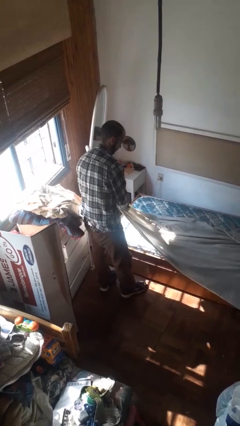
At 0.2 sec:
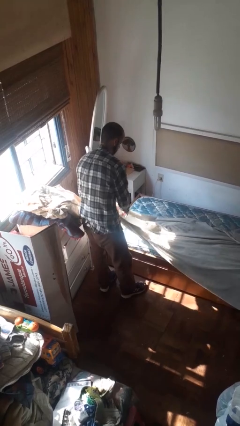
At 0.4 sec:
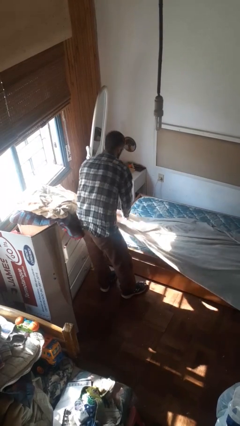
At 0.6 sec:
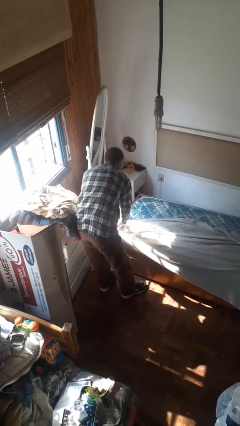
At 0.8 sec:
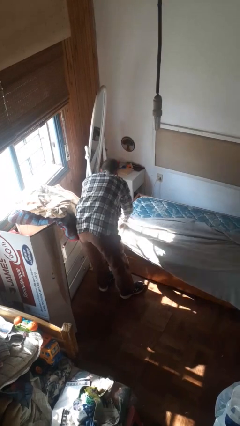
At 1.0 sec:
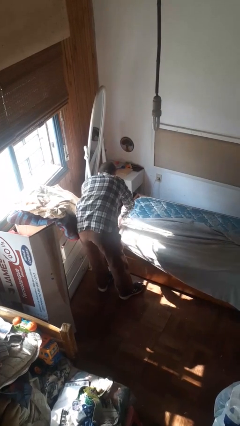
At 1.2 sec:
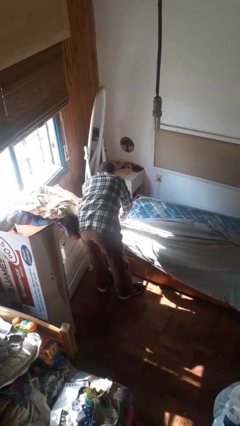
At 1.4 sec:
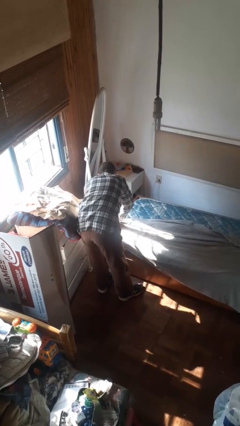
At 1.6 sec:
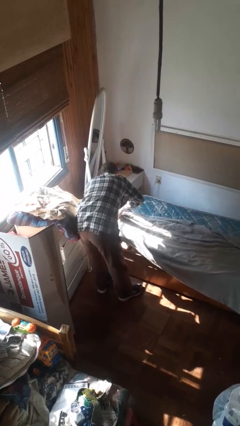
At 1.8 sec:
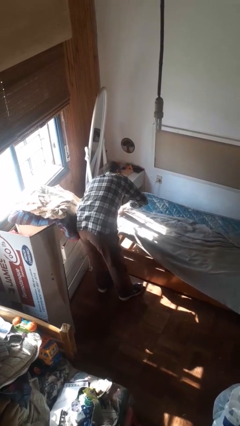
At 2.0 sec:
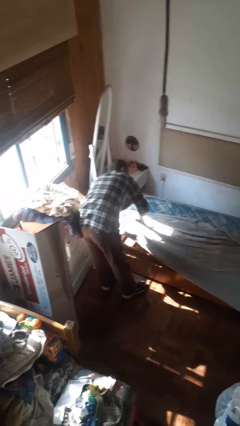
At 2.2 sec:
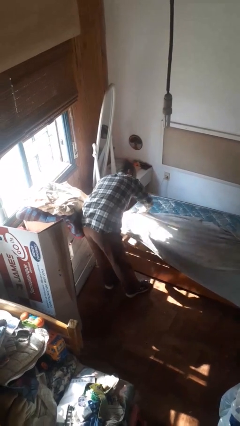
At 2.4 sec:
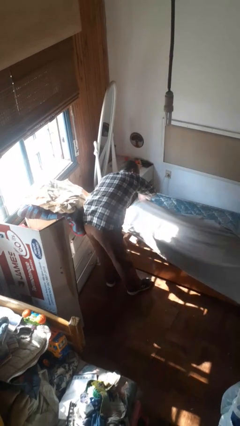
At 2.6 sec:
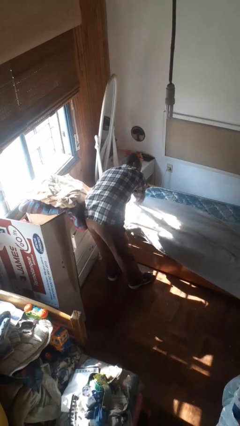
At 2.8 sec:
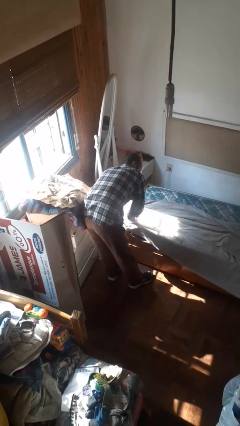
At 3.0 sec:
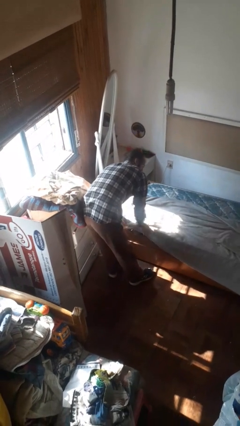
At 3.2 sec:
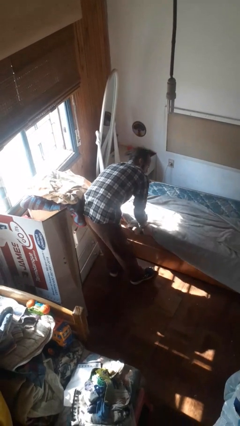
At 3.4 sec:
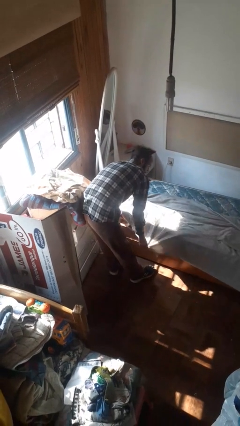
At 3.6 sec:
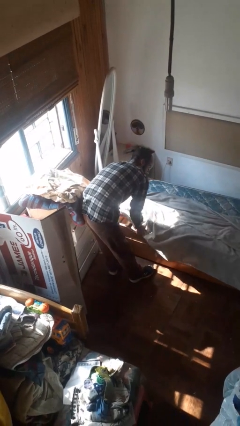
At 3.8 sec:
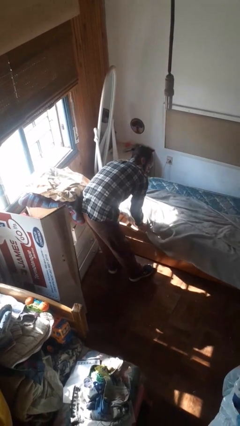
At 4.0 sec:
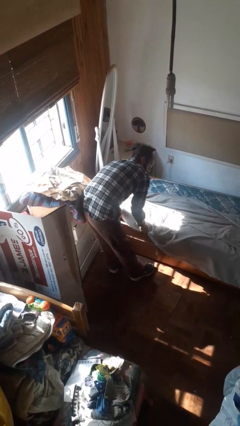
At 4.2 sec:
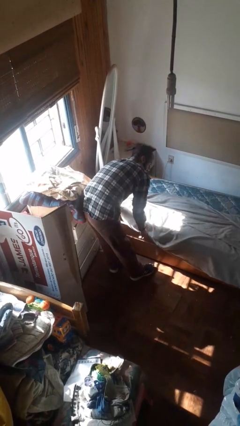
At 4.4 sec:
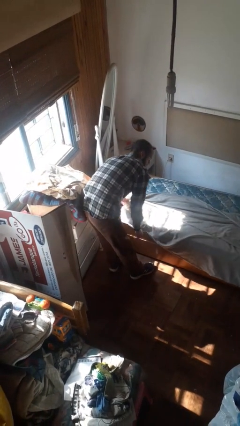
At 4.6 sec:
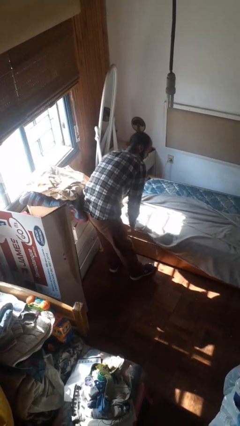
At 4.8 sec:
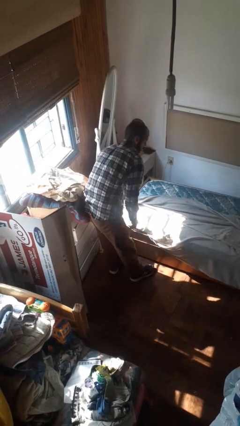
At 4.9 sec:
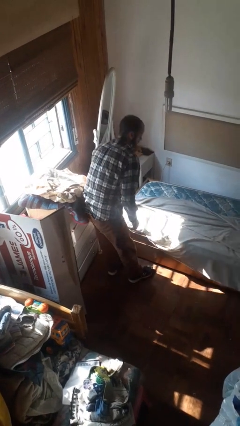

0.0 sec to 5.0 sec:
person makes bed

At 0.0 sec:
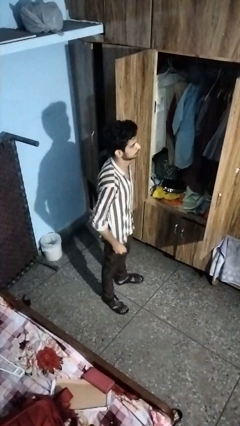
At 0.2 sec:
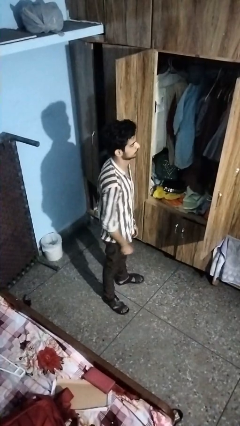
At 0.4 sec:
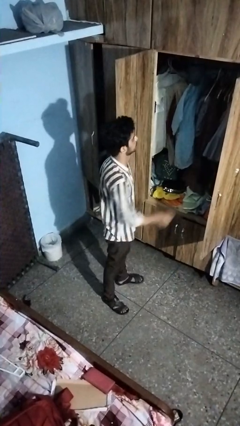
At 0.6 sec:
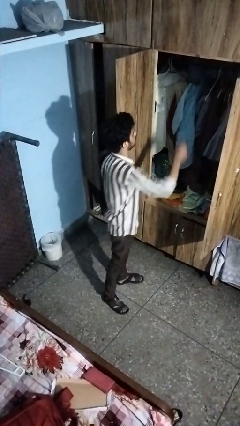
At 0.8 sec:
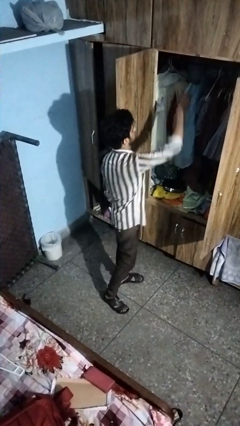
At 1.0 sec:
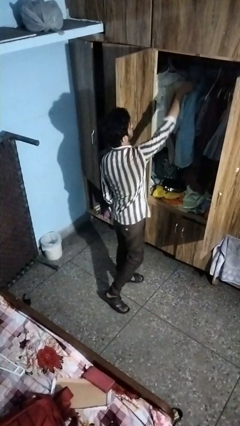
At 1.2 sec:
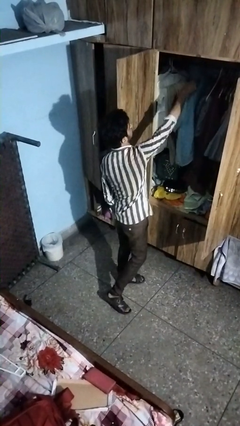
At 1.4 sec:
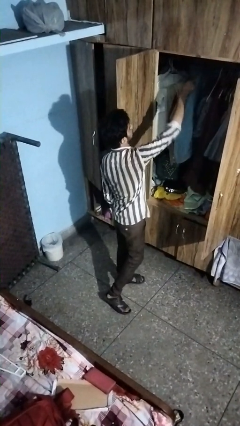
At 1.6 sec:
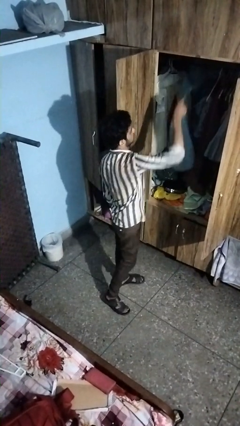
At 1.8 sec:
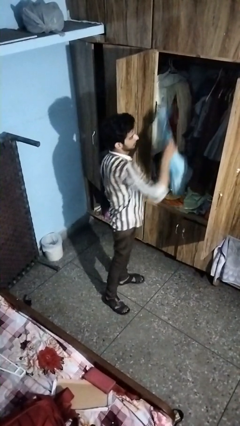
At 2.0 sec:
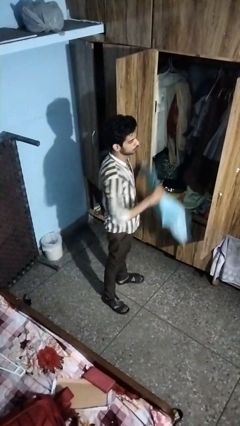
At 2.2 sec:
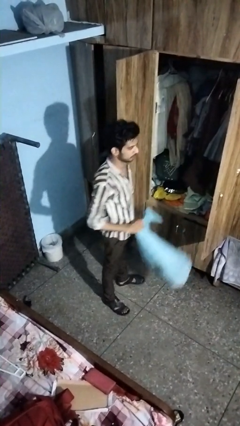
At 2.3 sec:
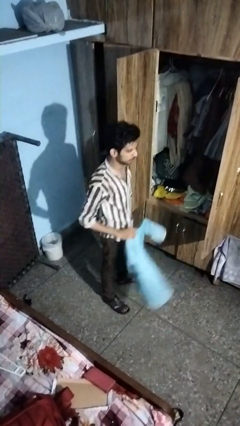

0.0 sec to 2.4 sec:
person takes clothes from closet

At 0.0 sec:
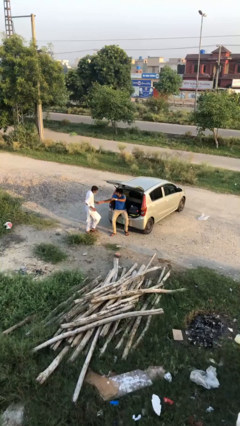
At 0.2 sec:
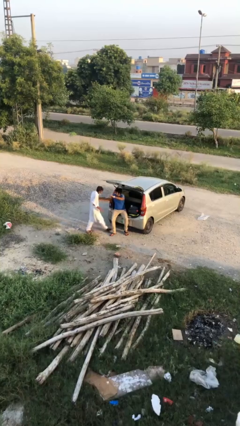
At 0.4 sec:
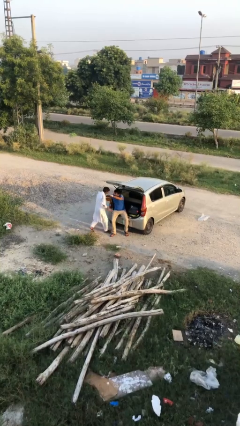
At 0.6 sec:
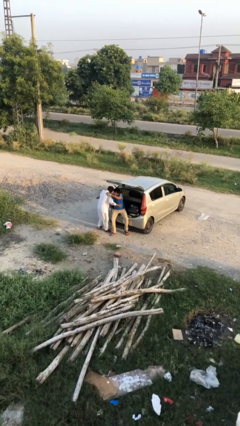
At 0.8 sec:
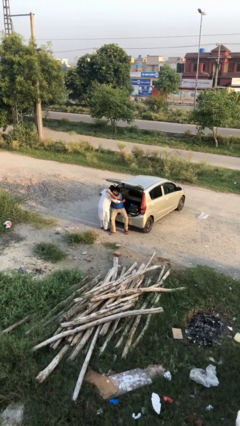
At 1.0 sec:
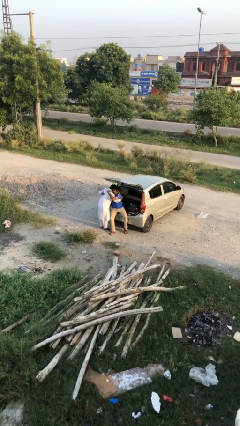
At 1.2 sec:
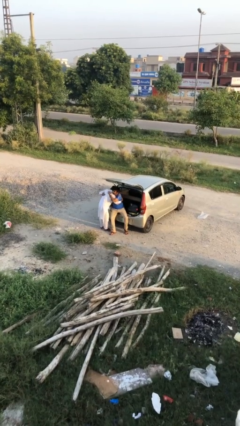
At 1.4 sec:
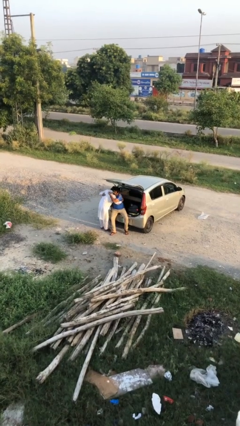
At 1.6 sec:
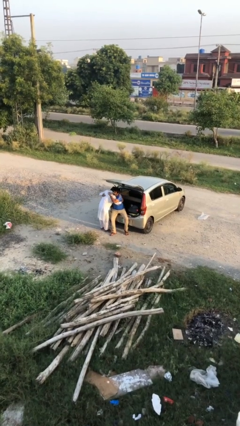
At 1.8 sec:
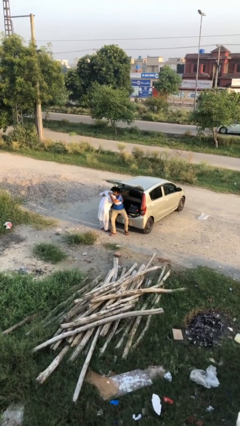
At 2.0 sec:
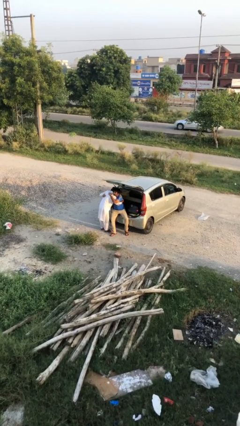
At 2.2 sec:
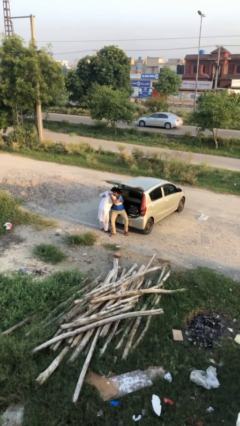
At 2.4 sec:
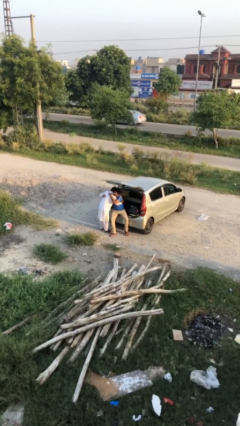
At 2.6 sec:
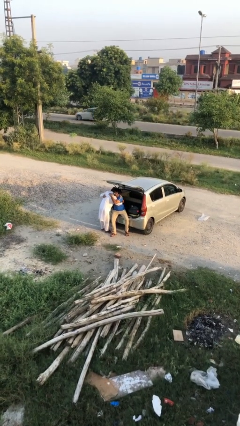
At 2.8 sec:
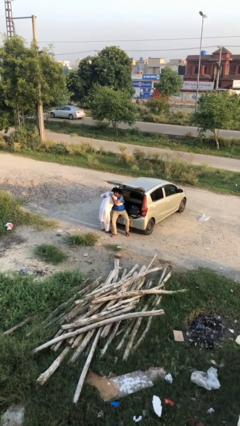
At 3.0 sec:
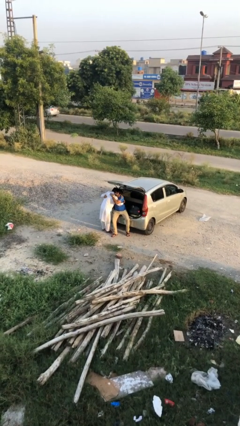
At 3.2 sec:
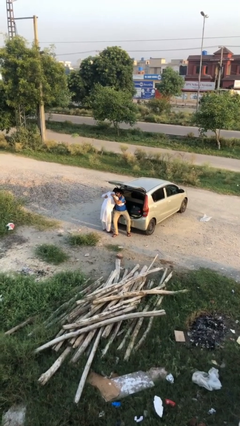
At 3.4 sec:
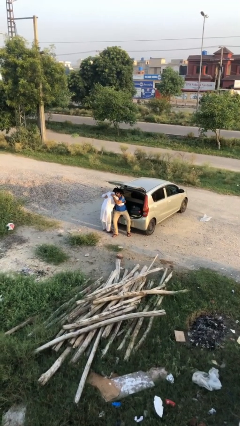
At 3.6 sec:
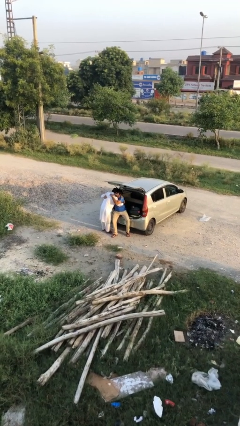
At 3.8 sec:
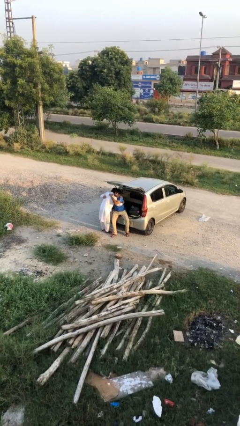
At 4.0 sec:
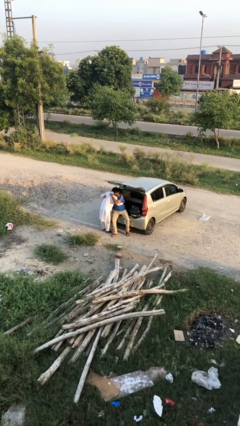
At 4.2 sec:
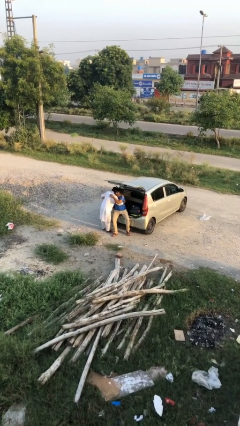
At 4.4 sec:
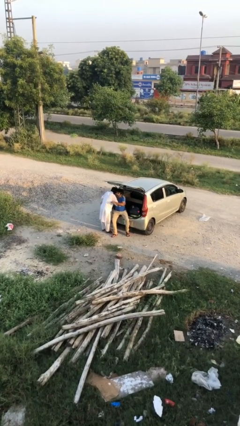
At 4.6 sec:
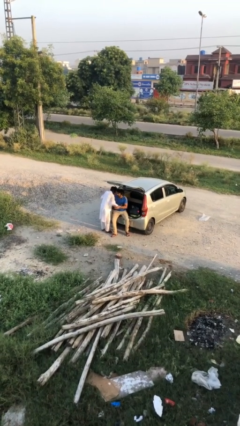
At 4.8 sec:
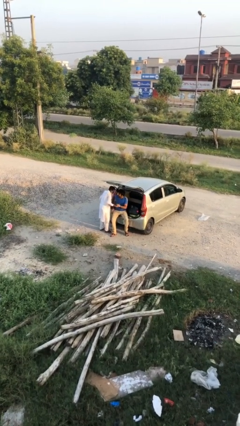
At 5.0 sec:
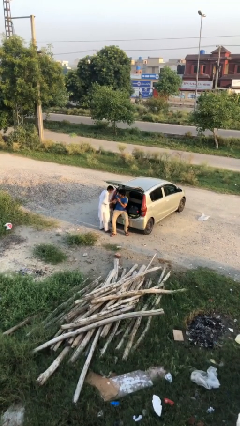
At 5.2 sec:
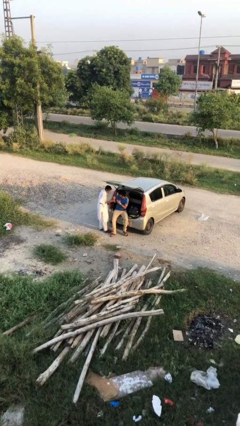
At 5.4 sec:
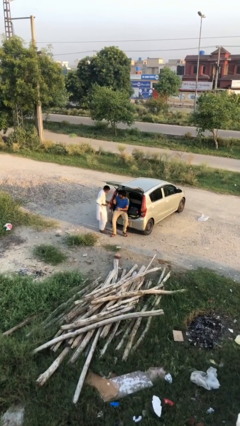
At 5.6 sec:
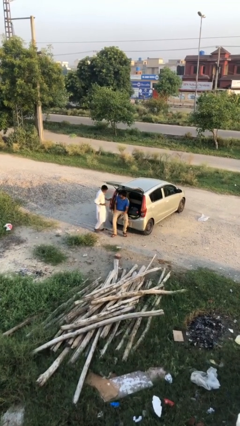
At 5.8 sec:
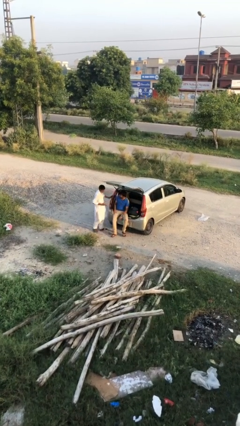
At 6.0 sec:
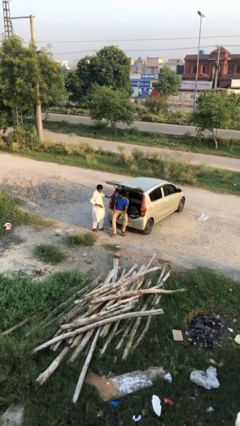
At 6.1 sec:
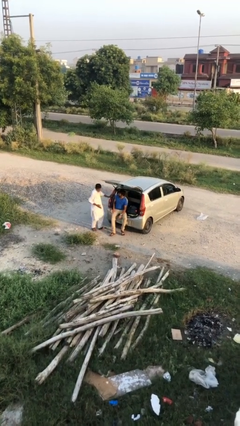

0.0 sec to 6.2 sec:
person embraces person

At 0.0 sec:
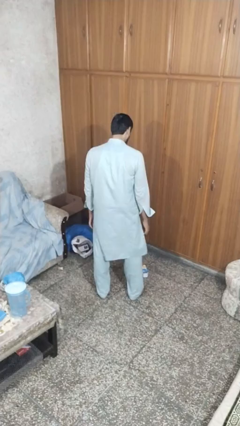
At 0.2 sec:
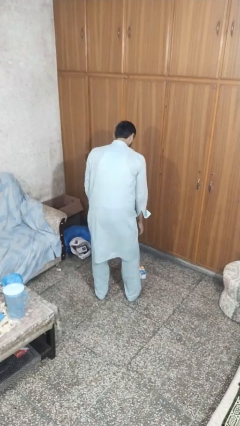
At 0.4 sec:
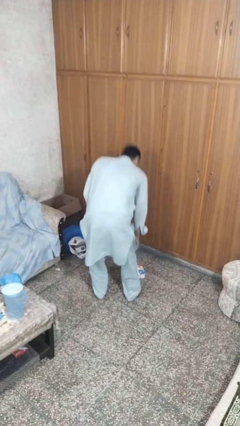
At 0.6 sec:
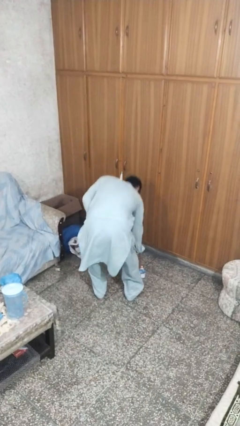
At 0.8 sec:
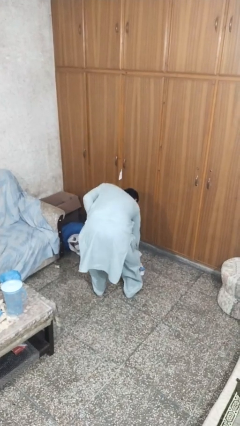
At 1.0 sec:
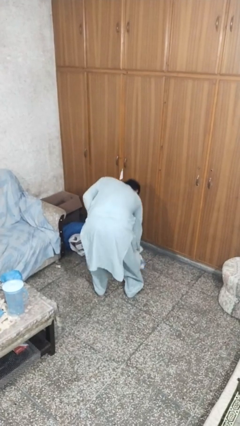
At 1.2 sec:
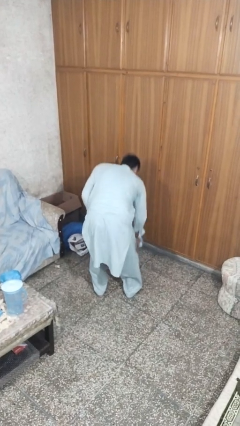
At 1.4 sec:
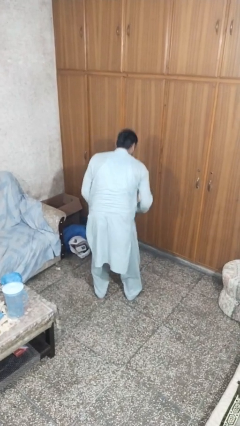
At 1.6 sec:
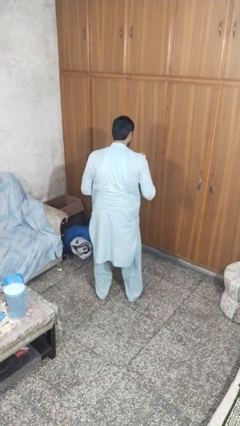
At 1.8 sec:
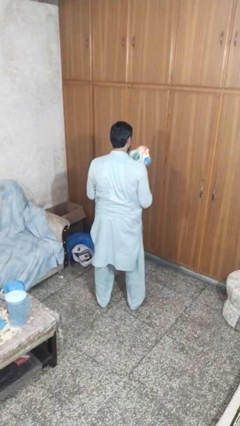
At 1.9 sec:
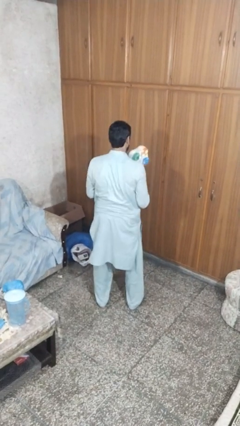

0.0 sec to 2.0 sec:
person picks up object from floor

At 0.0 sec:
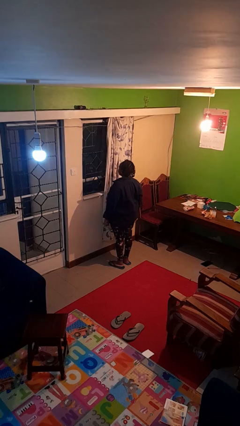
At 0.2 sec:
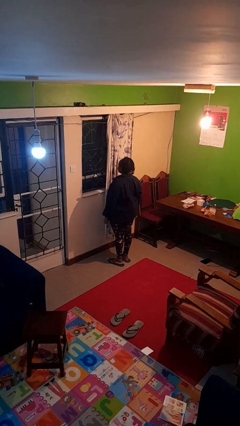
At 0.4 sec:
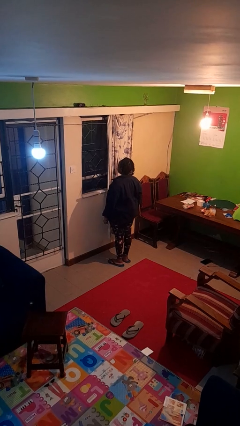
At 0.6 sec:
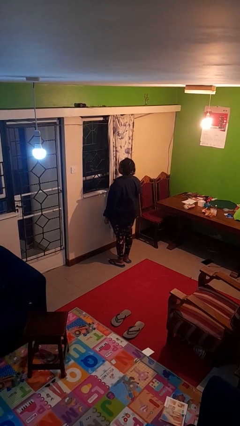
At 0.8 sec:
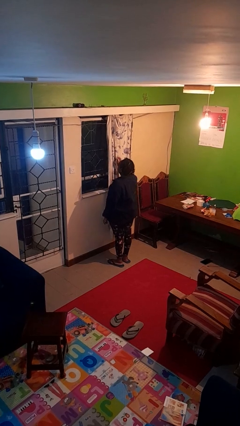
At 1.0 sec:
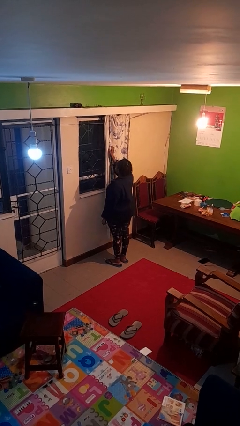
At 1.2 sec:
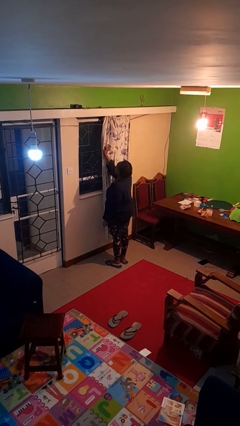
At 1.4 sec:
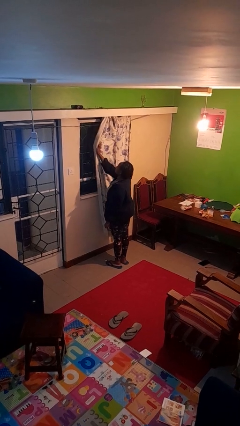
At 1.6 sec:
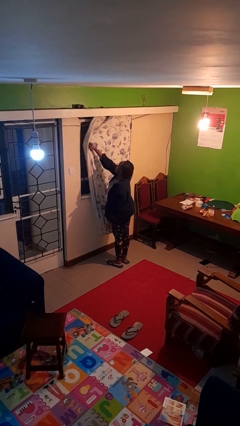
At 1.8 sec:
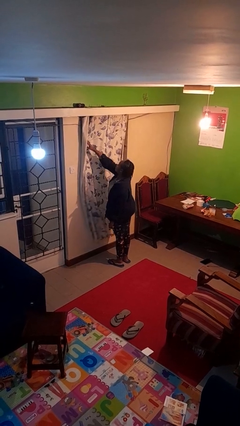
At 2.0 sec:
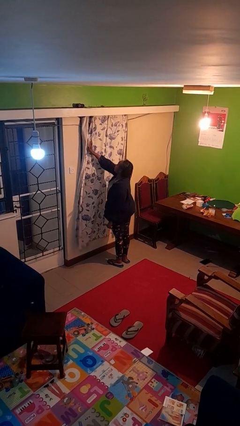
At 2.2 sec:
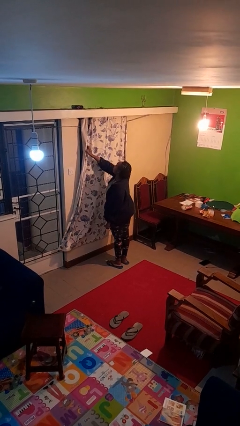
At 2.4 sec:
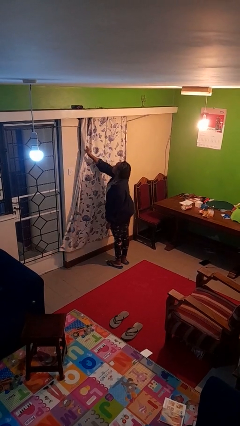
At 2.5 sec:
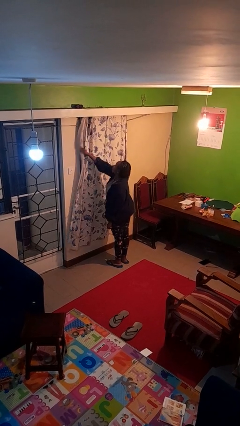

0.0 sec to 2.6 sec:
person closes curtains
